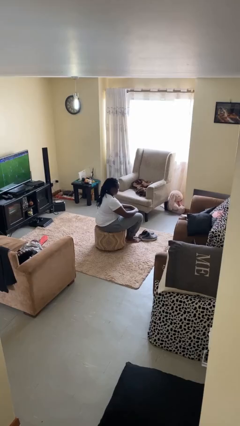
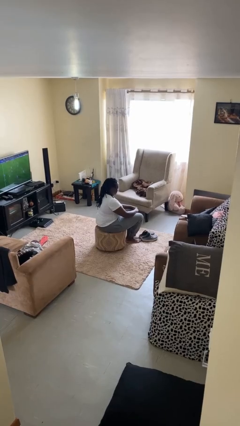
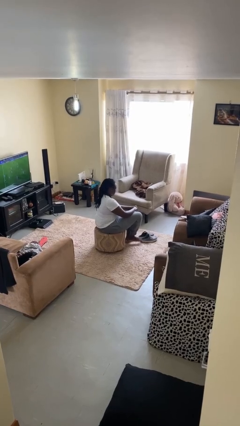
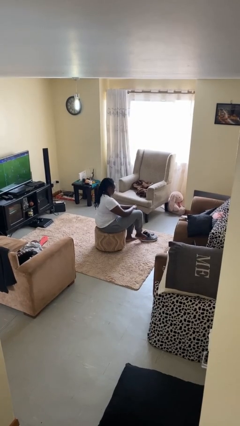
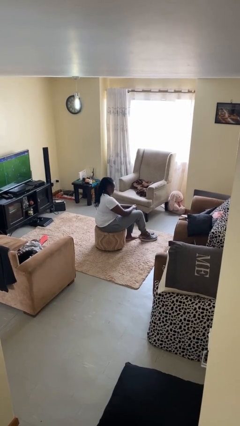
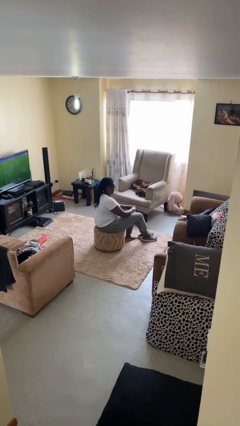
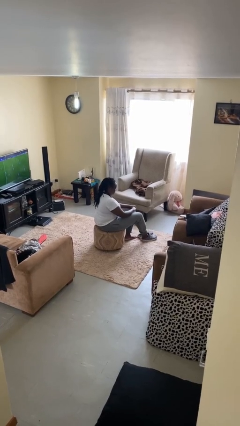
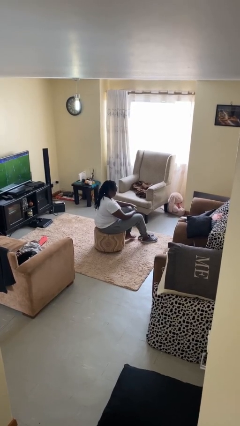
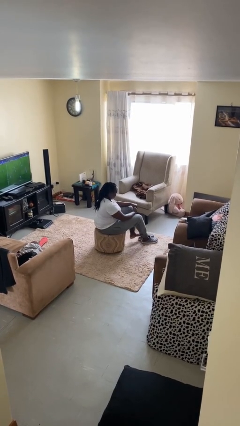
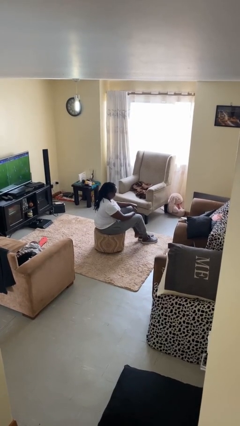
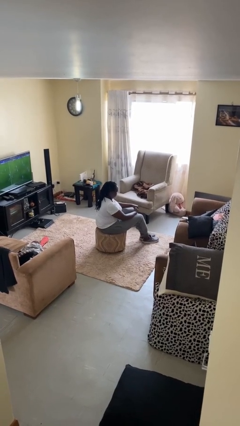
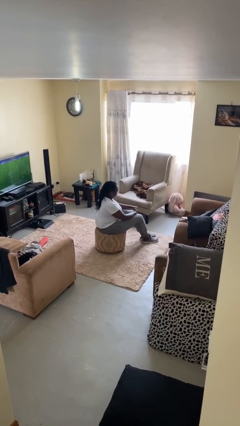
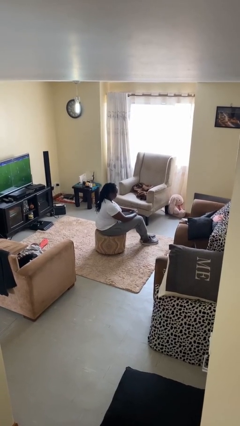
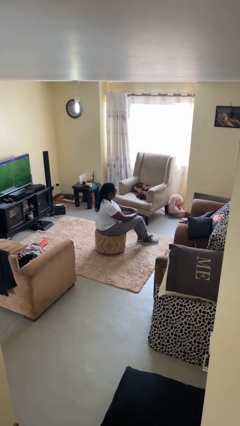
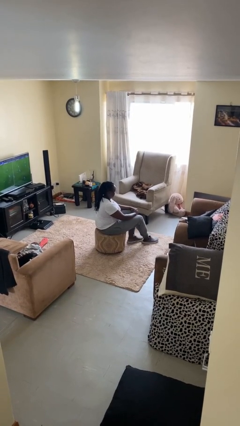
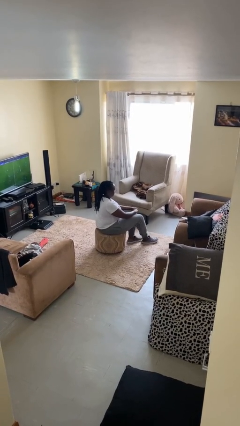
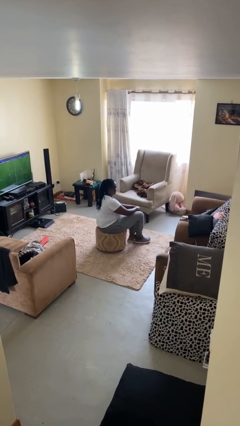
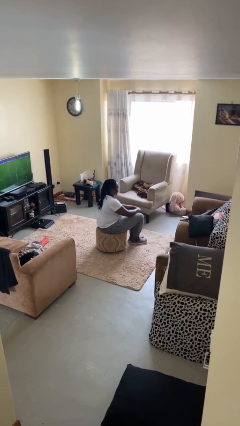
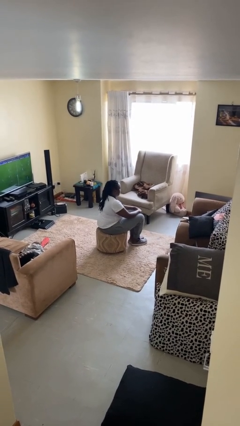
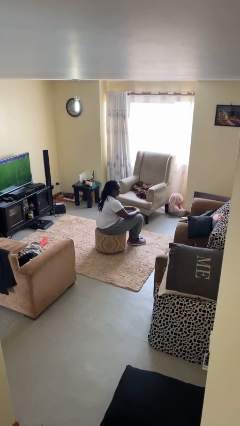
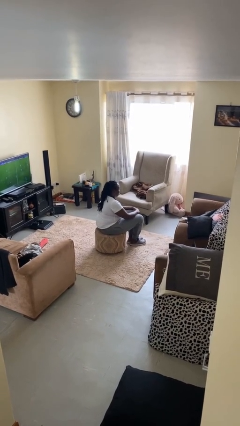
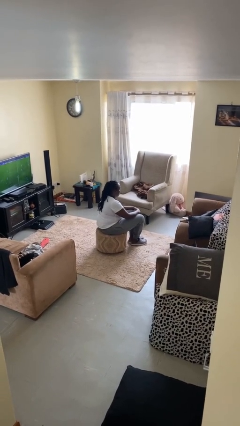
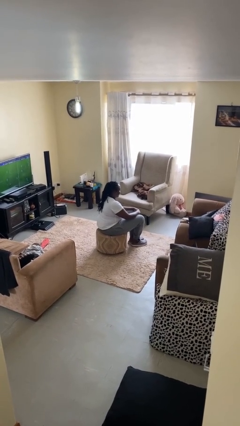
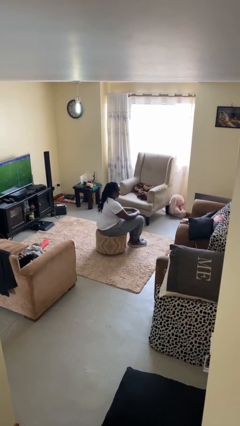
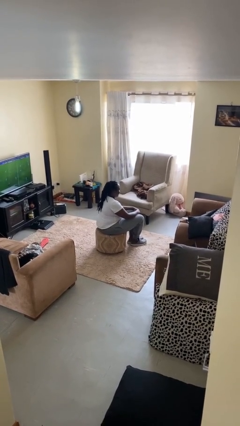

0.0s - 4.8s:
person puts on shoes

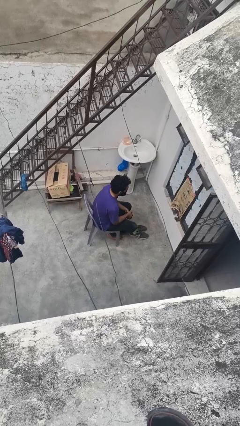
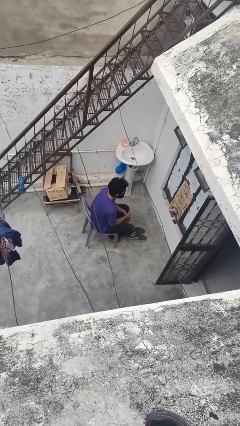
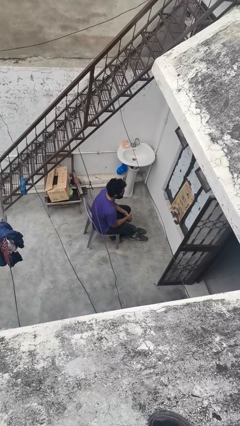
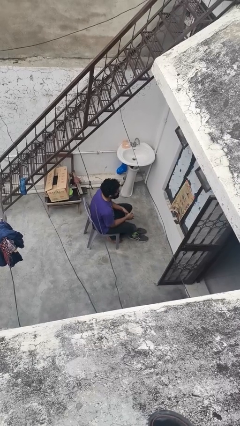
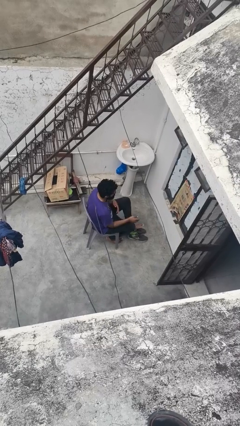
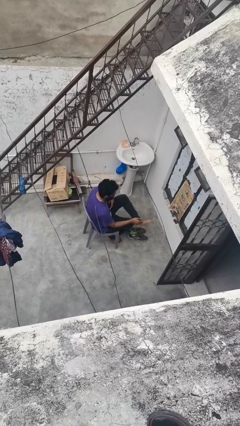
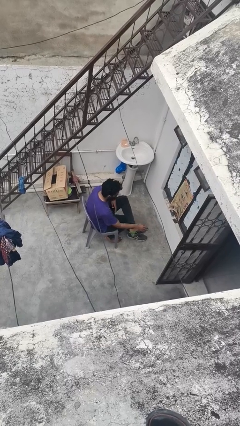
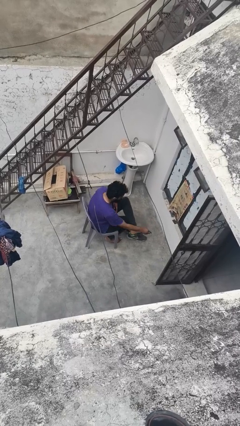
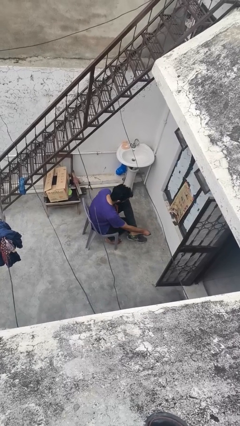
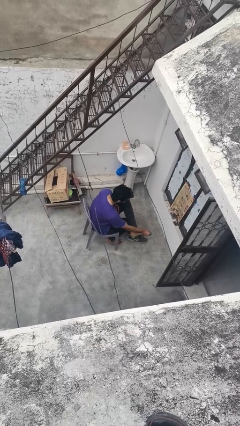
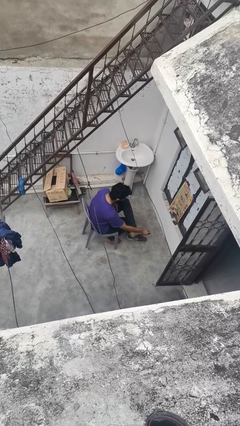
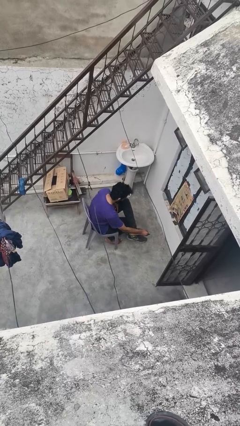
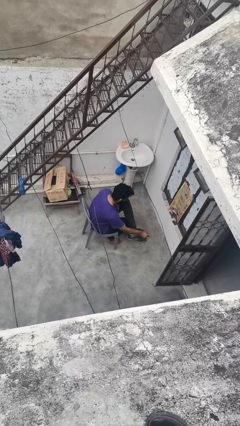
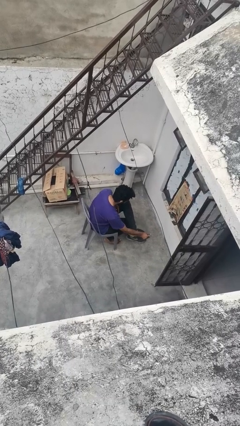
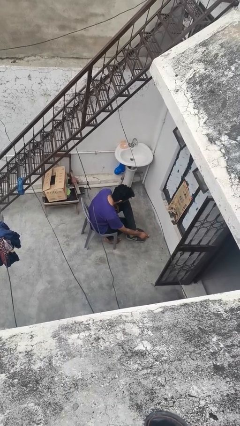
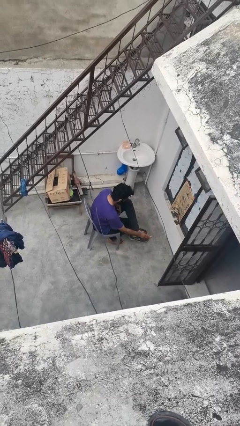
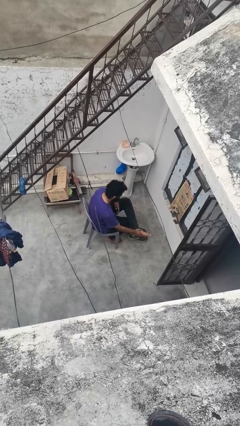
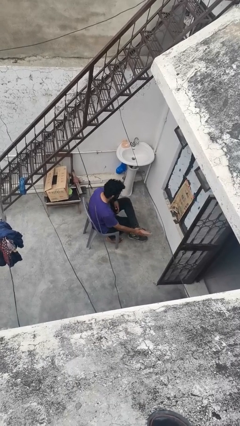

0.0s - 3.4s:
person rubs foot

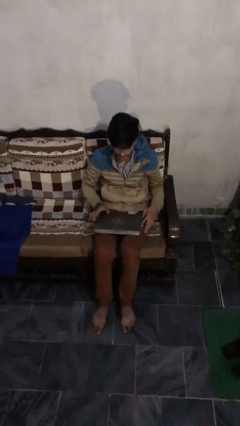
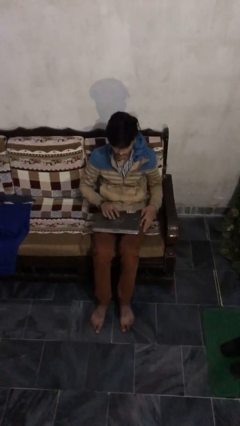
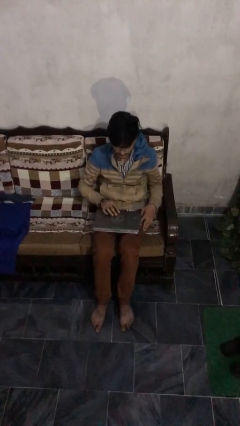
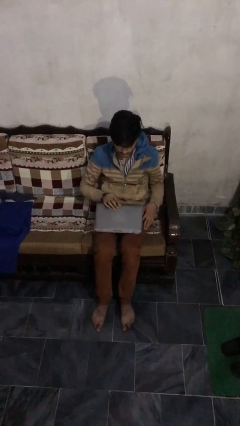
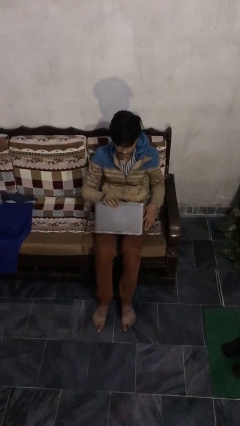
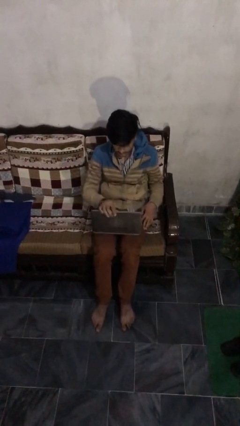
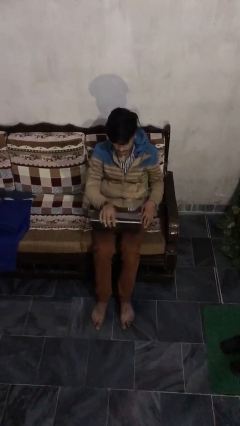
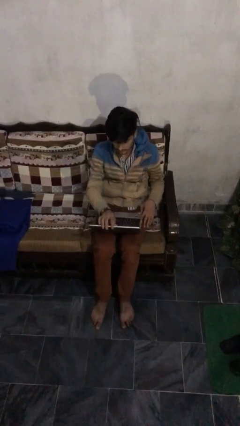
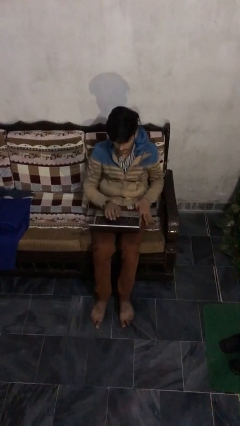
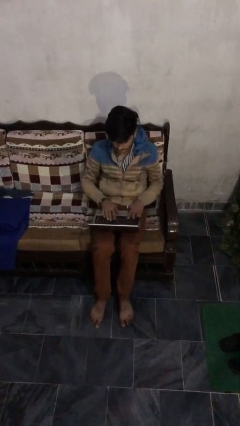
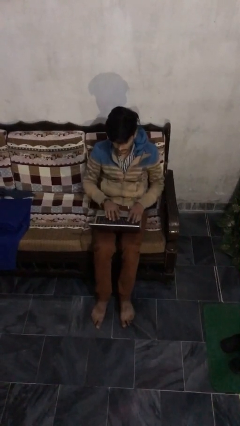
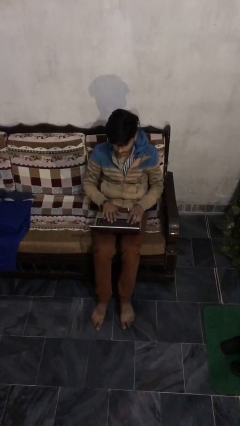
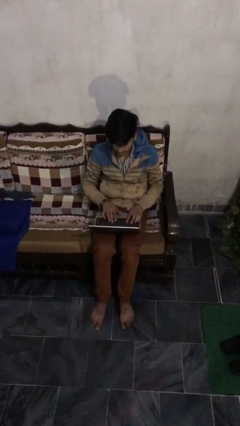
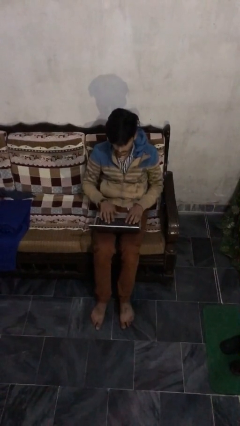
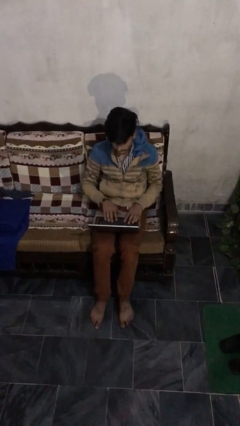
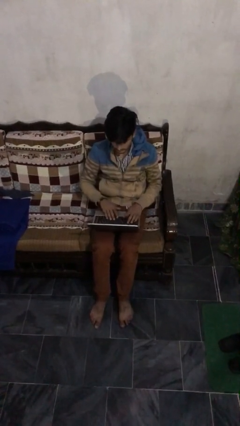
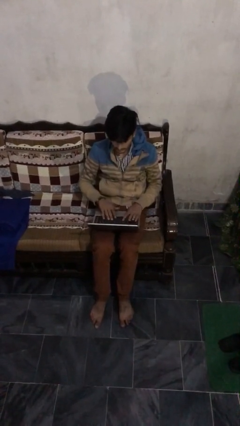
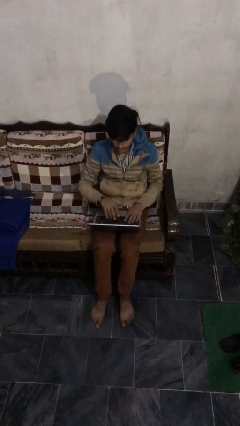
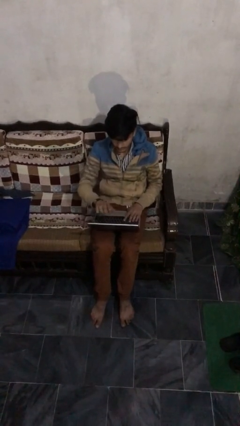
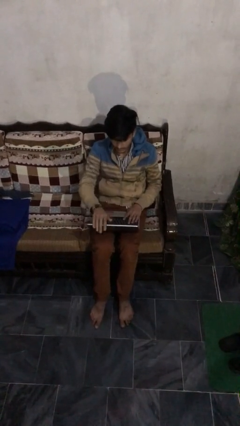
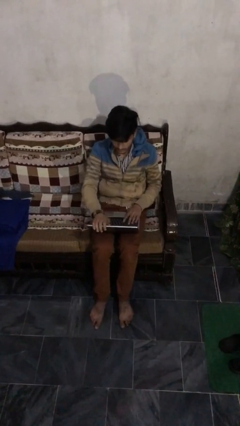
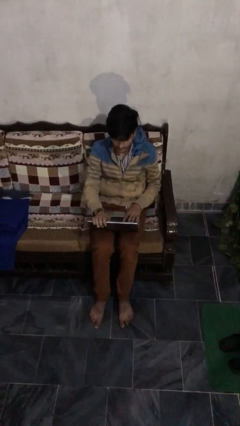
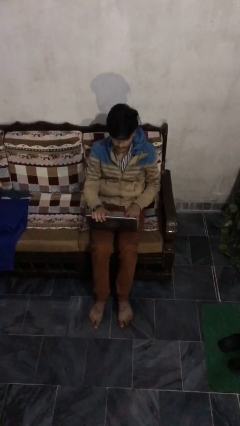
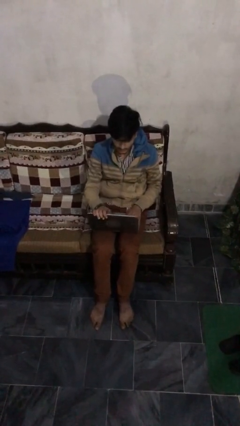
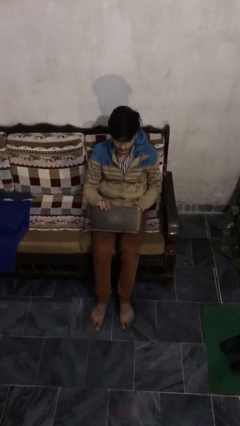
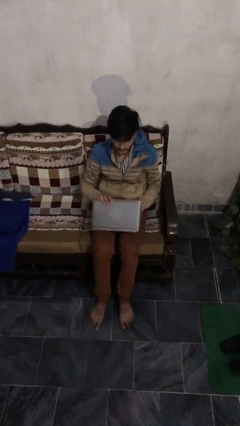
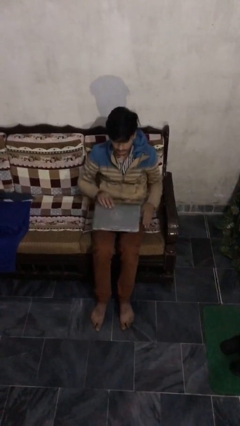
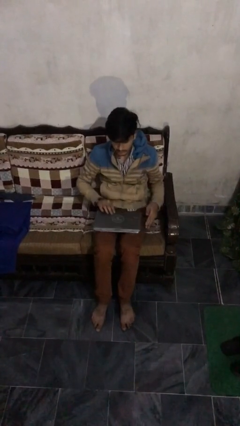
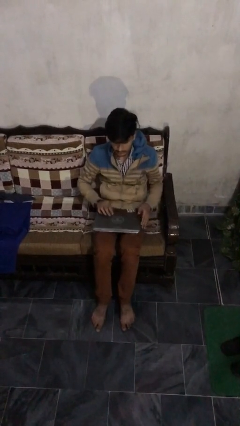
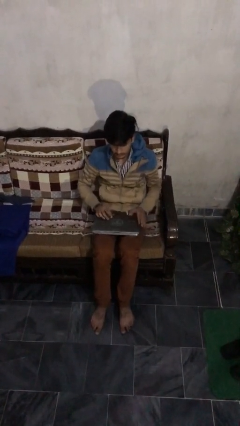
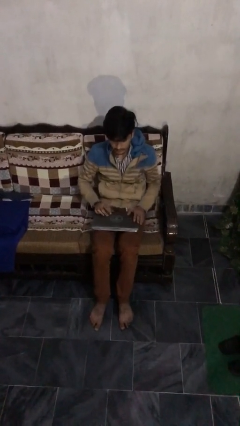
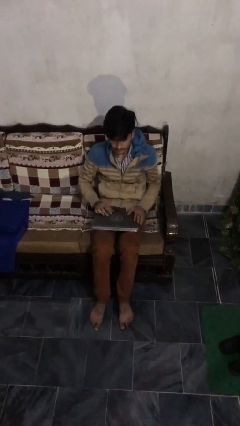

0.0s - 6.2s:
person interacts with laptop

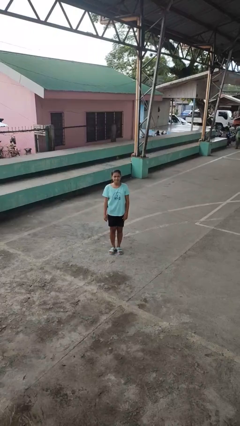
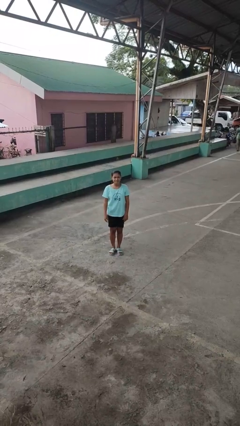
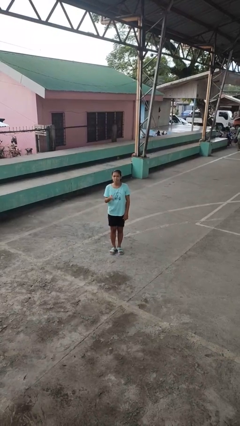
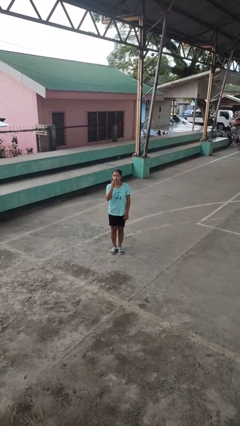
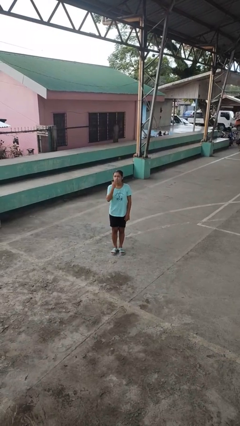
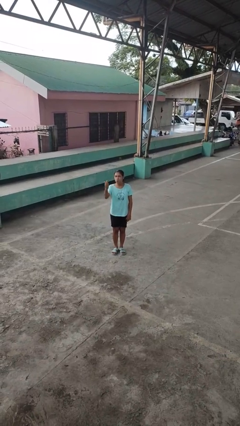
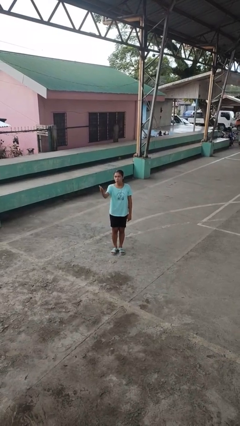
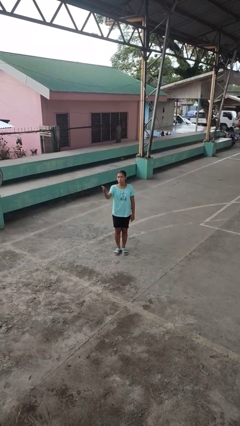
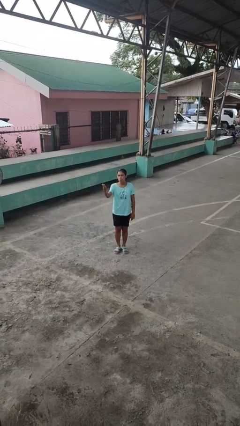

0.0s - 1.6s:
person gestures blow kiss

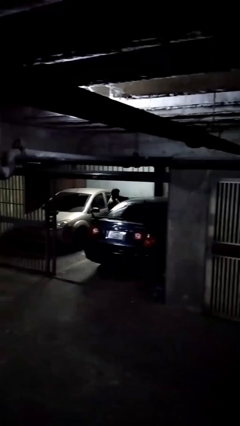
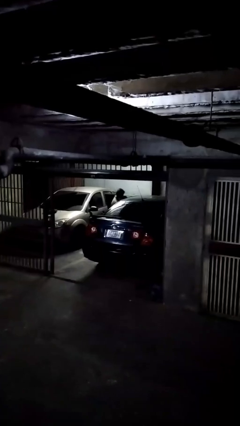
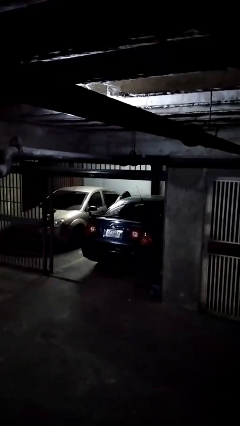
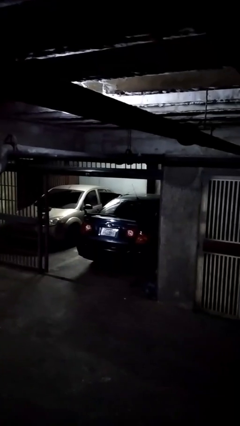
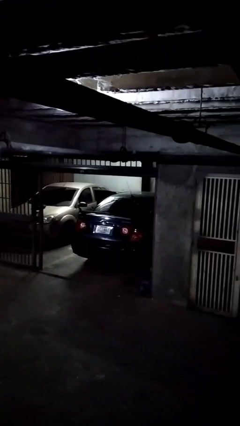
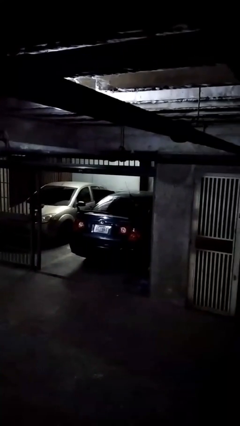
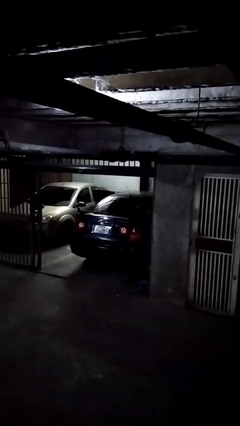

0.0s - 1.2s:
person loads car

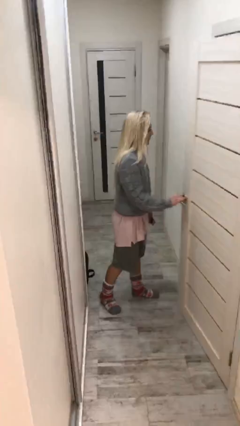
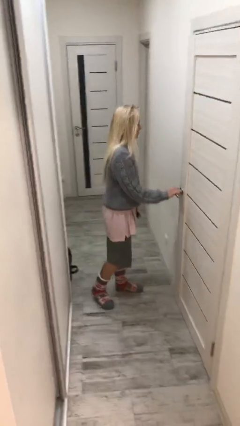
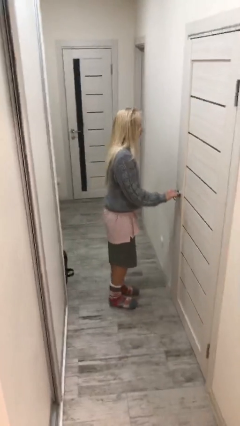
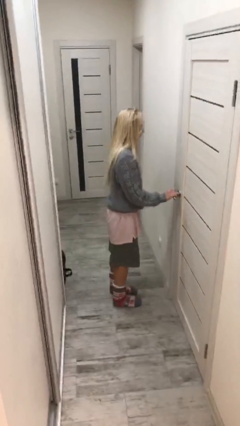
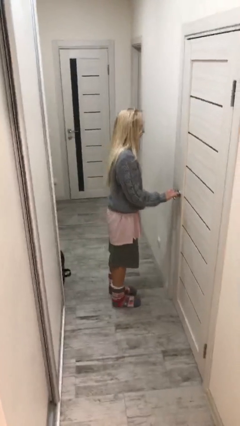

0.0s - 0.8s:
person closes facility door
